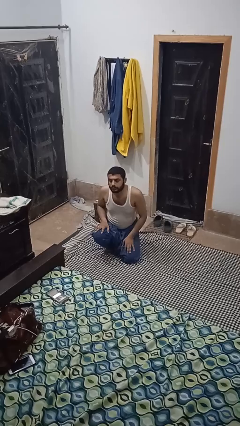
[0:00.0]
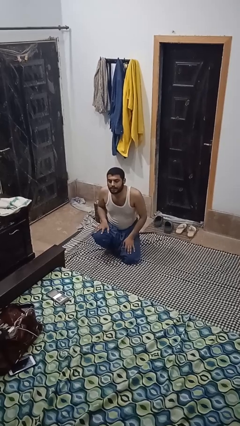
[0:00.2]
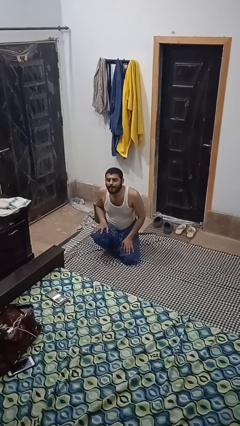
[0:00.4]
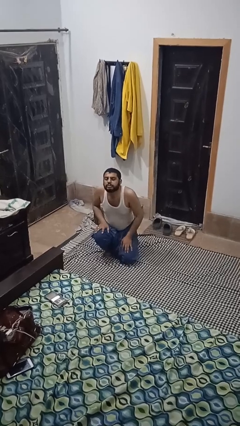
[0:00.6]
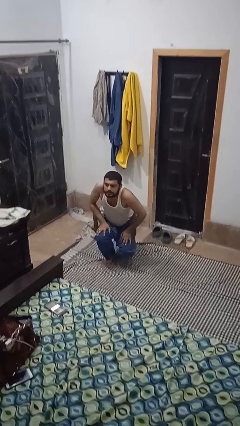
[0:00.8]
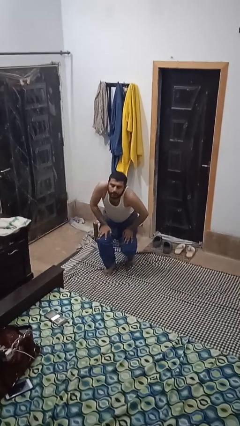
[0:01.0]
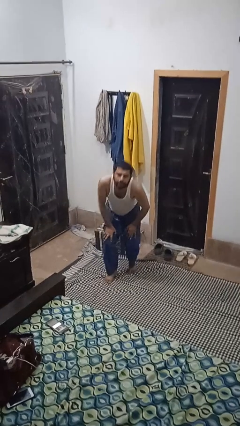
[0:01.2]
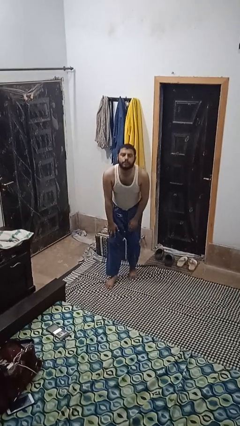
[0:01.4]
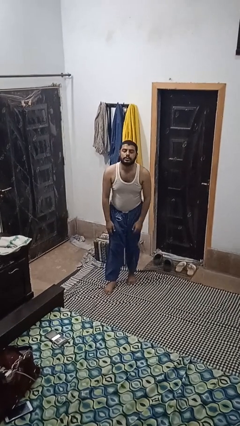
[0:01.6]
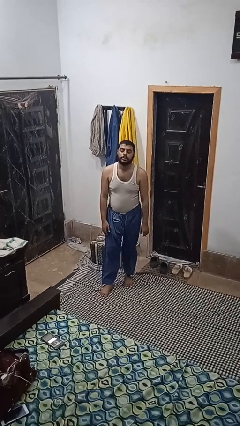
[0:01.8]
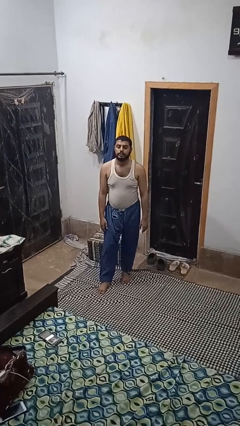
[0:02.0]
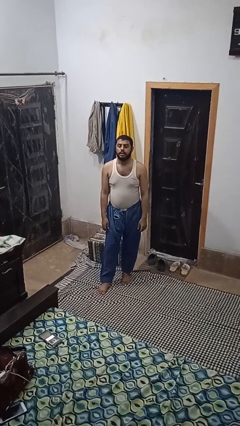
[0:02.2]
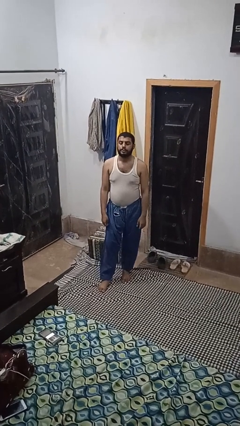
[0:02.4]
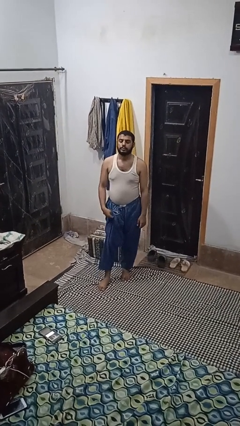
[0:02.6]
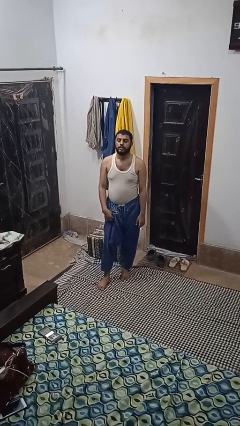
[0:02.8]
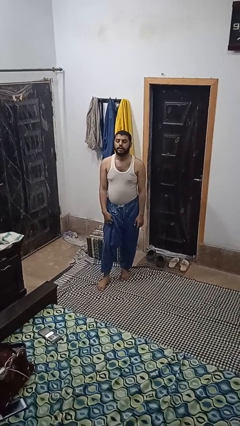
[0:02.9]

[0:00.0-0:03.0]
person stands up from floor

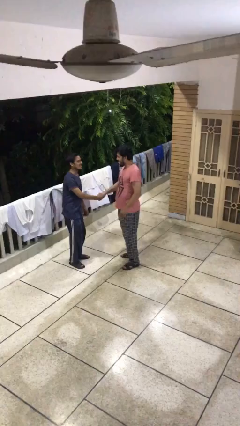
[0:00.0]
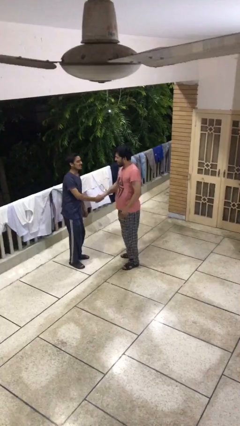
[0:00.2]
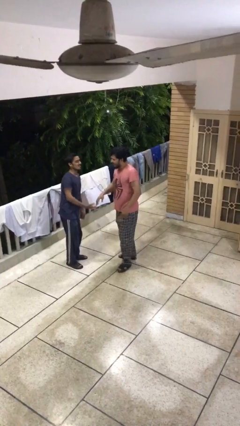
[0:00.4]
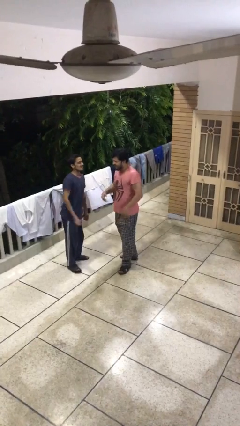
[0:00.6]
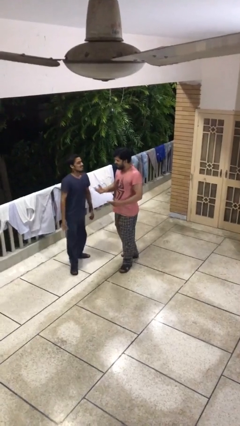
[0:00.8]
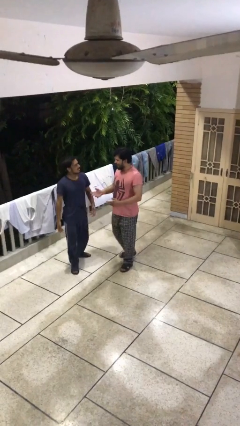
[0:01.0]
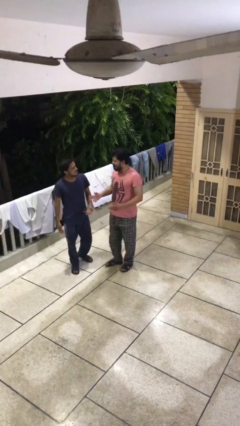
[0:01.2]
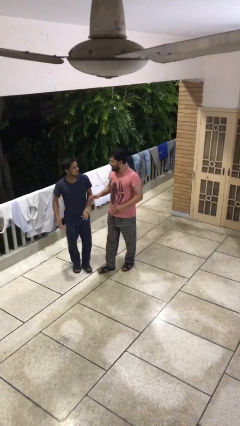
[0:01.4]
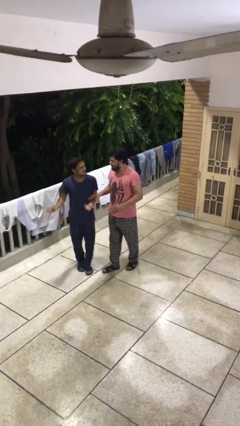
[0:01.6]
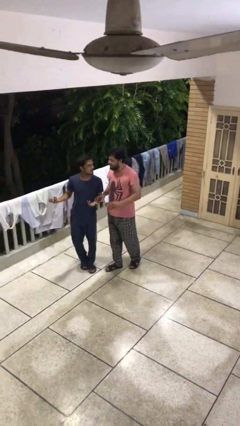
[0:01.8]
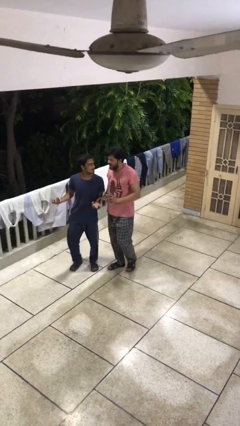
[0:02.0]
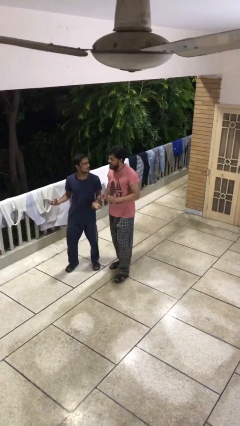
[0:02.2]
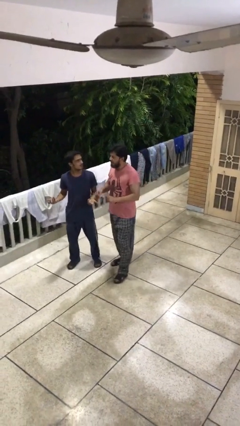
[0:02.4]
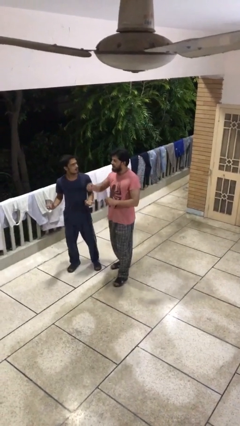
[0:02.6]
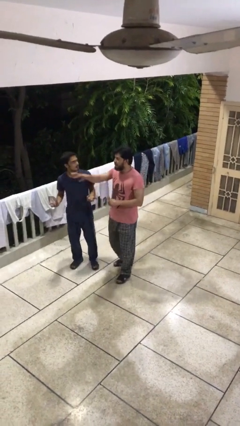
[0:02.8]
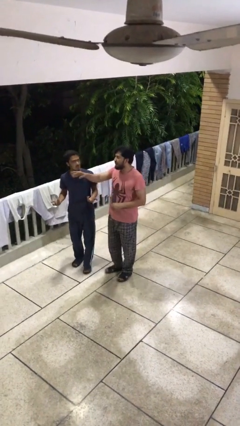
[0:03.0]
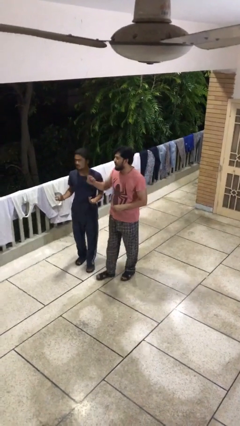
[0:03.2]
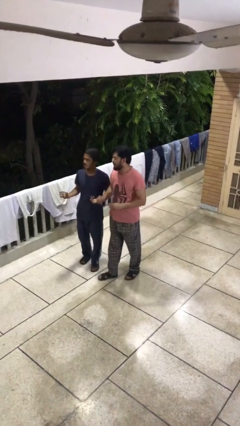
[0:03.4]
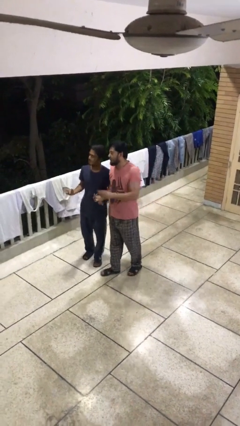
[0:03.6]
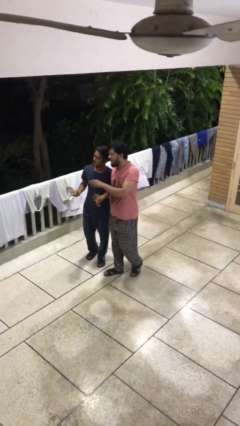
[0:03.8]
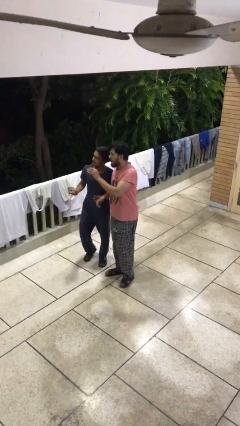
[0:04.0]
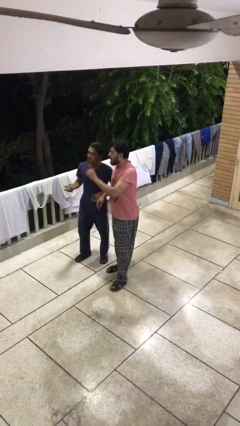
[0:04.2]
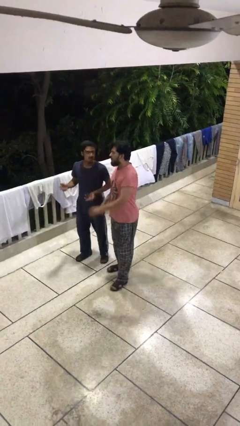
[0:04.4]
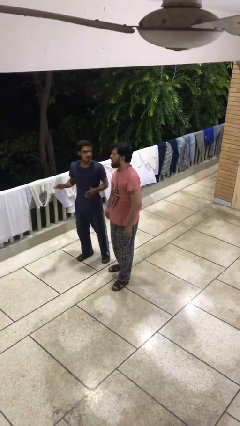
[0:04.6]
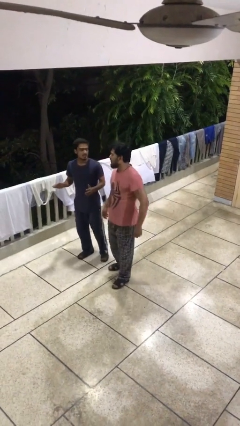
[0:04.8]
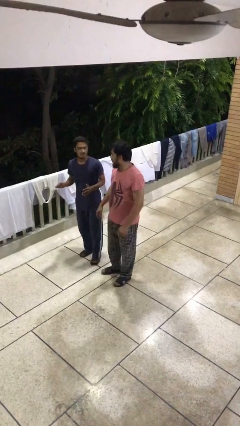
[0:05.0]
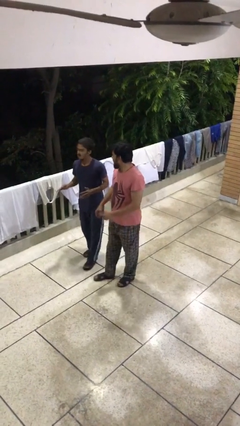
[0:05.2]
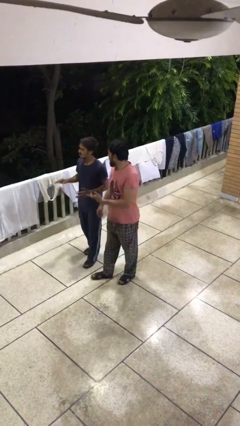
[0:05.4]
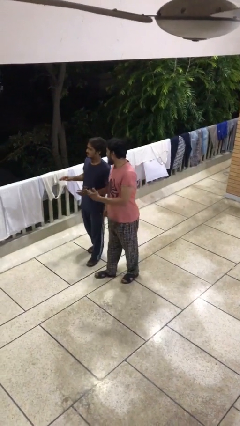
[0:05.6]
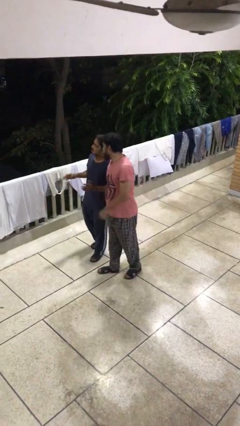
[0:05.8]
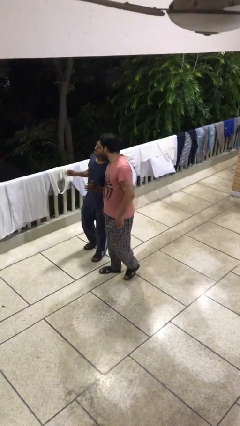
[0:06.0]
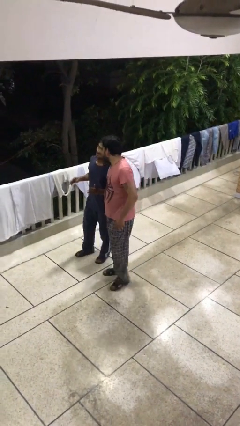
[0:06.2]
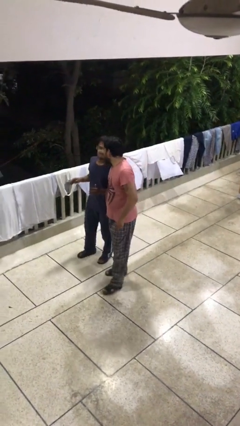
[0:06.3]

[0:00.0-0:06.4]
person talks to person

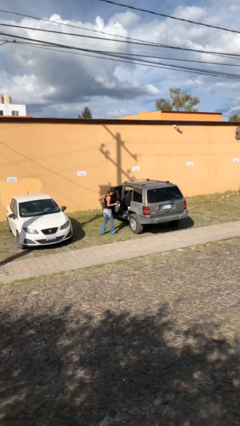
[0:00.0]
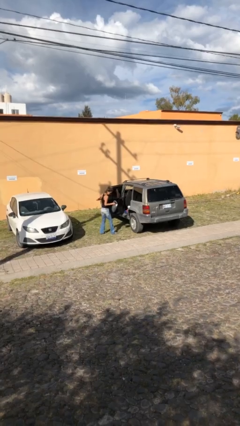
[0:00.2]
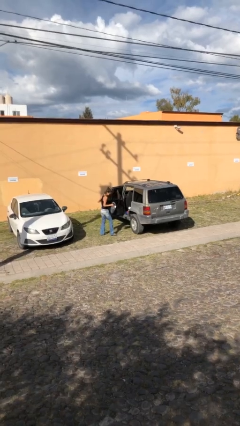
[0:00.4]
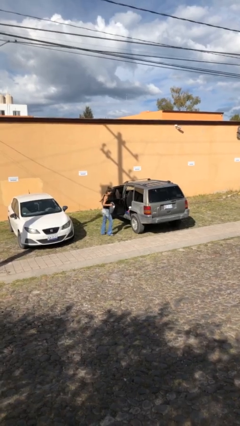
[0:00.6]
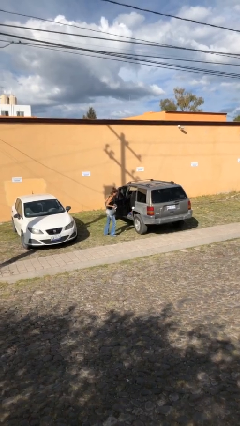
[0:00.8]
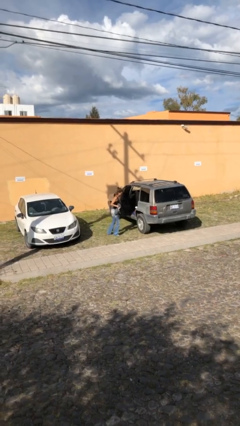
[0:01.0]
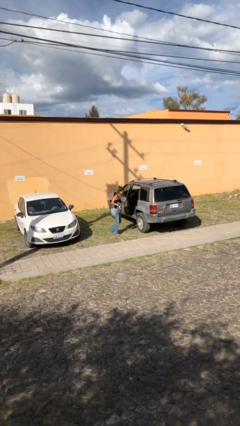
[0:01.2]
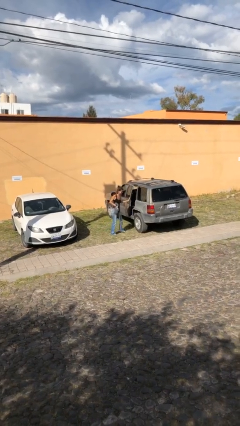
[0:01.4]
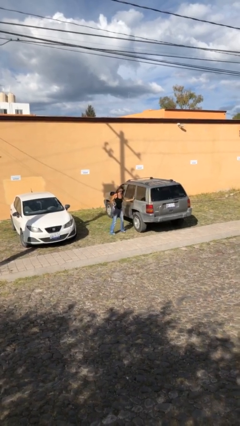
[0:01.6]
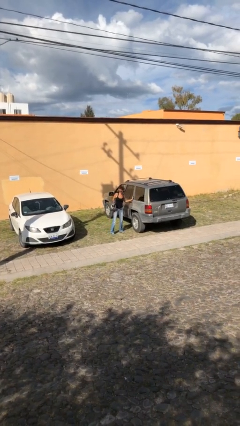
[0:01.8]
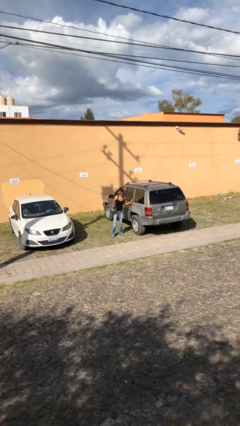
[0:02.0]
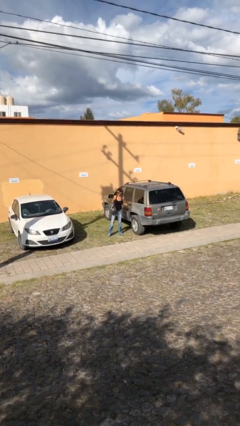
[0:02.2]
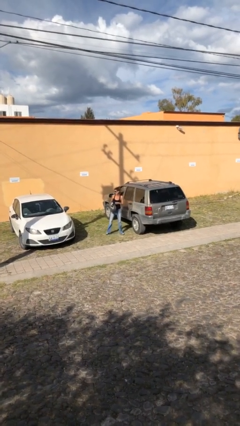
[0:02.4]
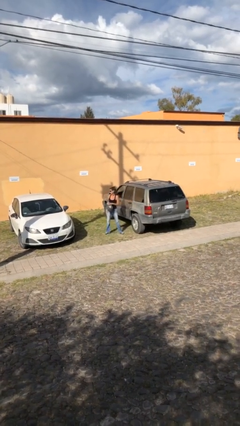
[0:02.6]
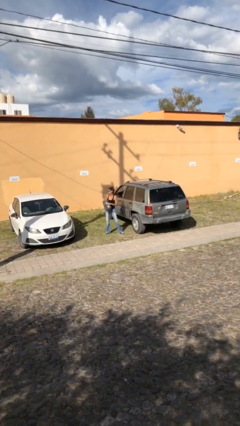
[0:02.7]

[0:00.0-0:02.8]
person closes car door

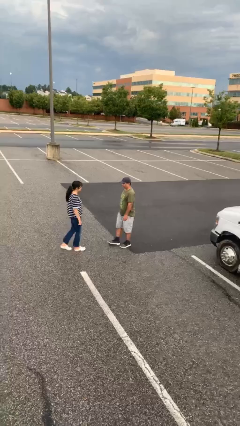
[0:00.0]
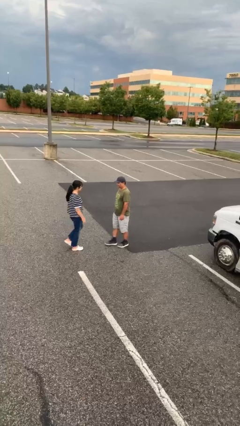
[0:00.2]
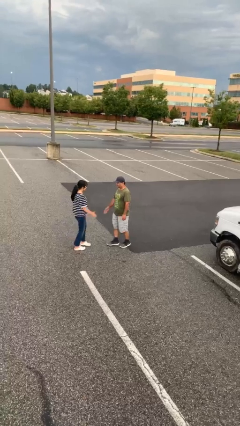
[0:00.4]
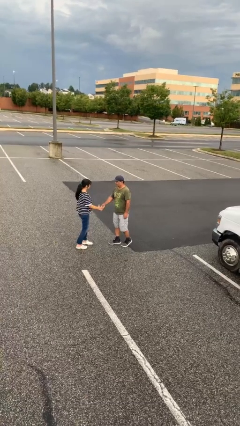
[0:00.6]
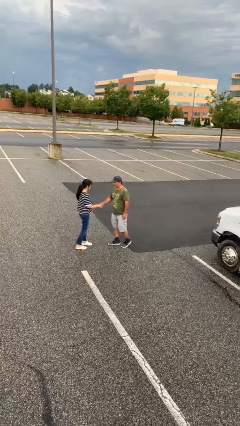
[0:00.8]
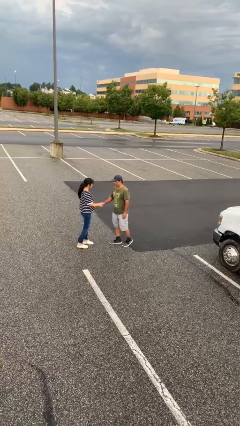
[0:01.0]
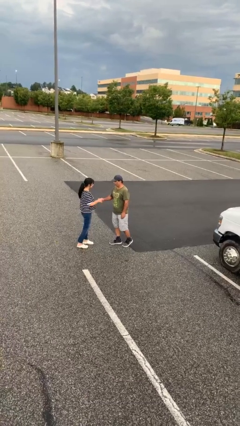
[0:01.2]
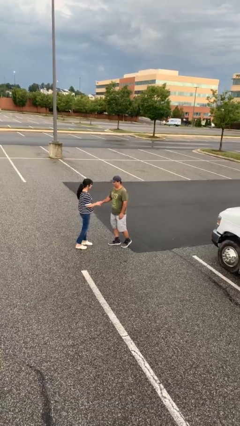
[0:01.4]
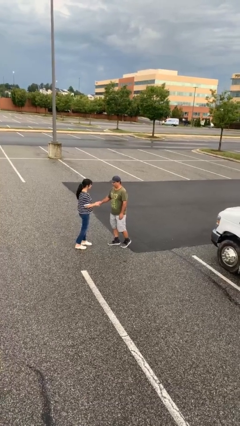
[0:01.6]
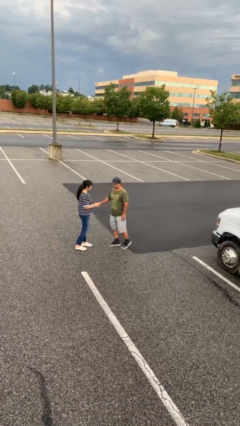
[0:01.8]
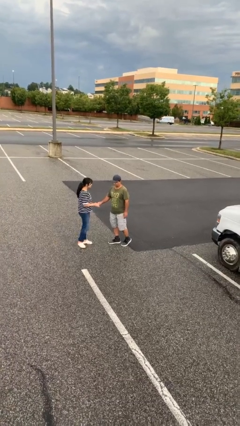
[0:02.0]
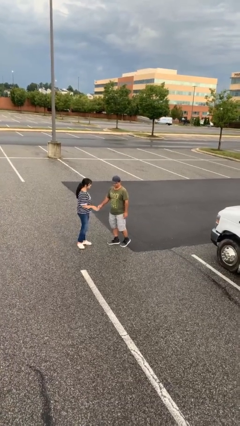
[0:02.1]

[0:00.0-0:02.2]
person shakes hand

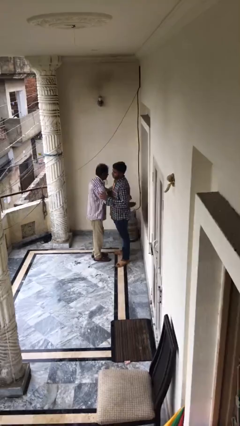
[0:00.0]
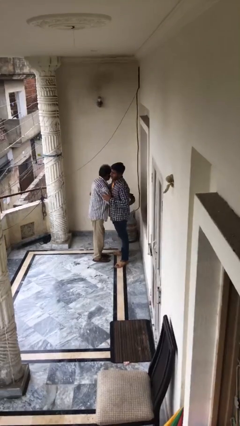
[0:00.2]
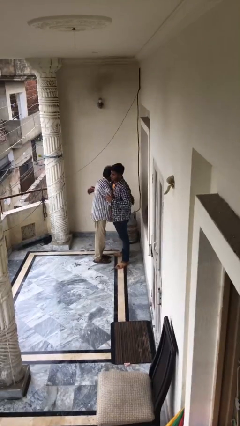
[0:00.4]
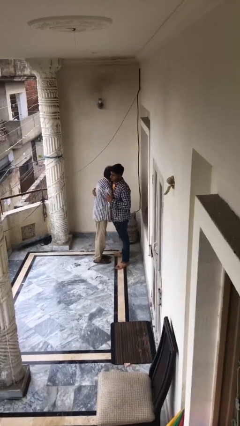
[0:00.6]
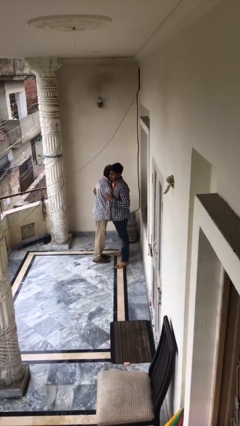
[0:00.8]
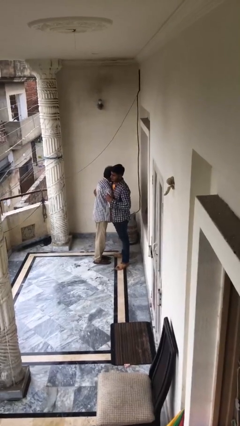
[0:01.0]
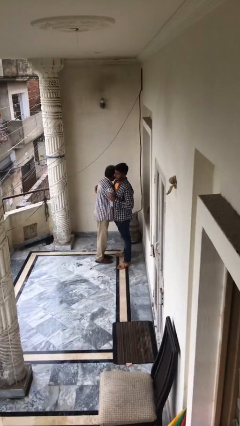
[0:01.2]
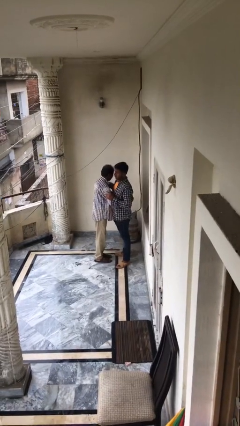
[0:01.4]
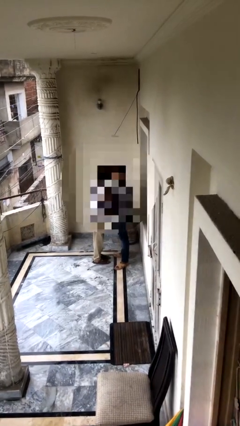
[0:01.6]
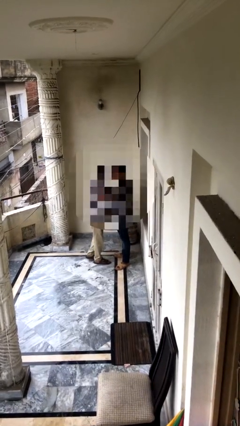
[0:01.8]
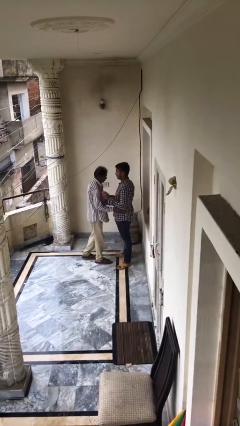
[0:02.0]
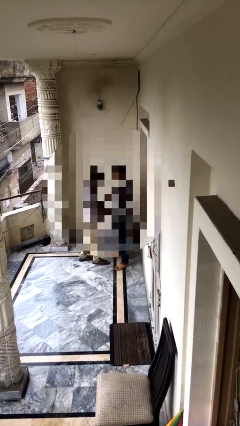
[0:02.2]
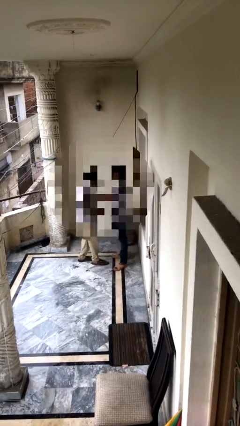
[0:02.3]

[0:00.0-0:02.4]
person embraces person
